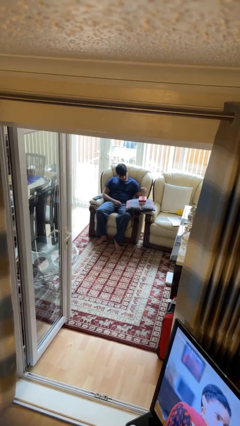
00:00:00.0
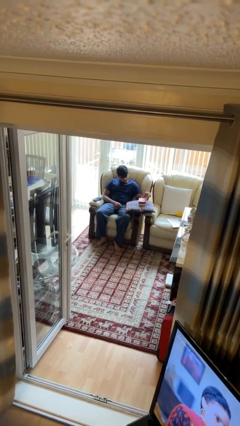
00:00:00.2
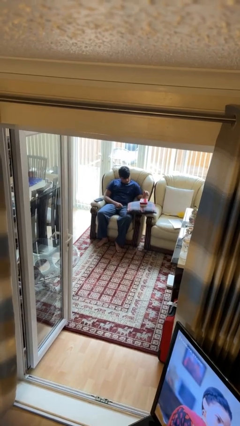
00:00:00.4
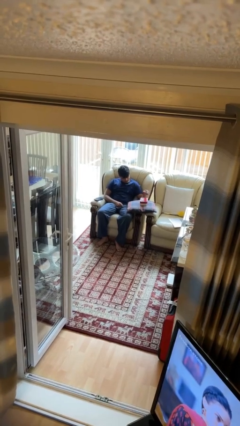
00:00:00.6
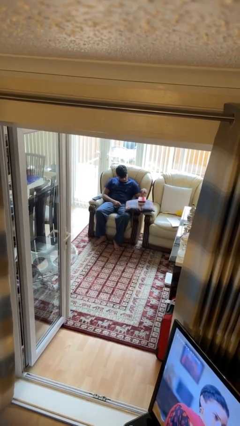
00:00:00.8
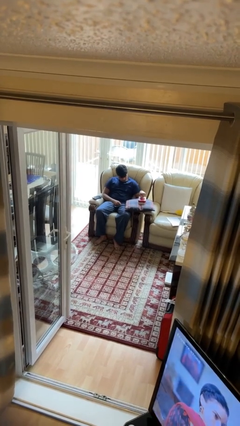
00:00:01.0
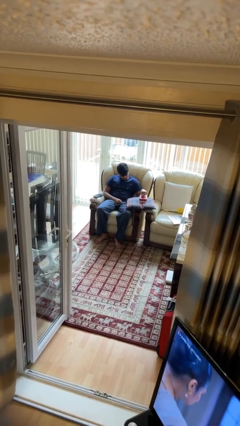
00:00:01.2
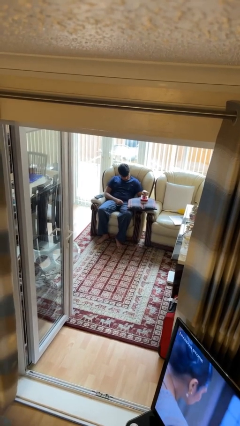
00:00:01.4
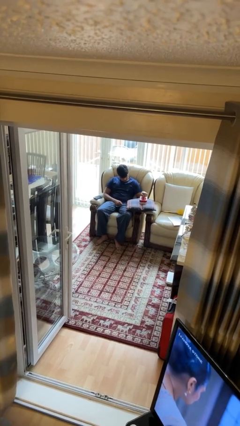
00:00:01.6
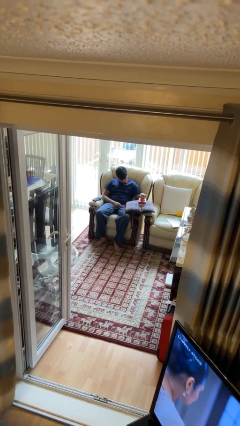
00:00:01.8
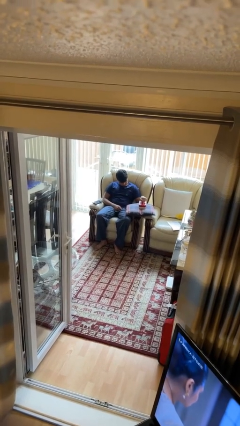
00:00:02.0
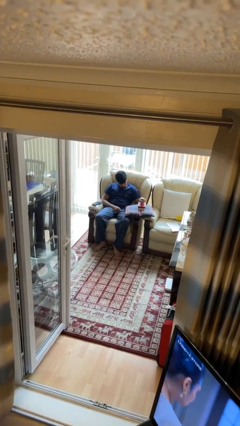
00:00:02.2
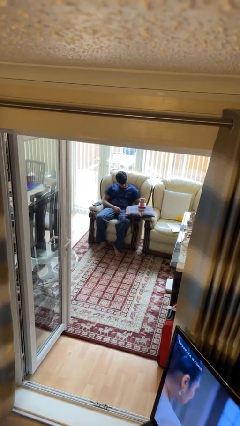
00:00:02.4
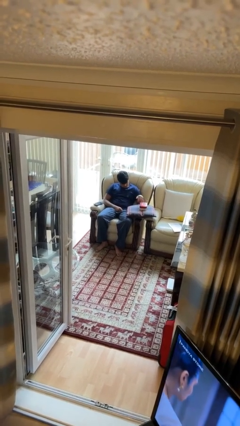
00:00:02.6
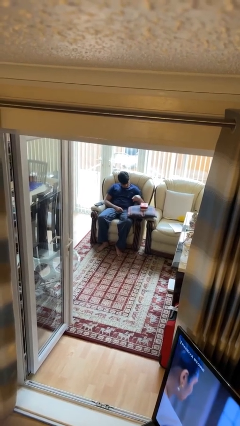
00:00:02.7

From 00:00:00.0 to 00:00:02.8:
person taps object with finger

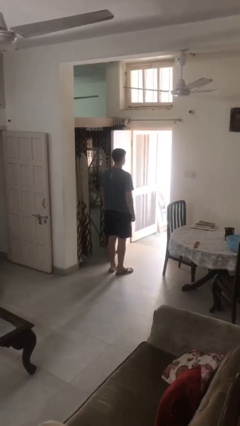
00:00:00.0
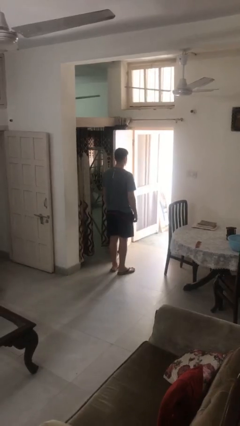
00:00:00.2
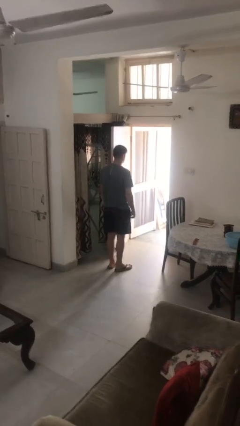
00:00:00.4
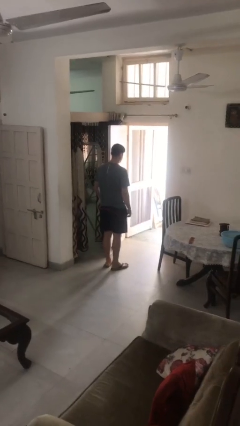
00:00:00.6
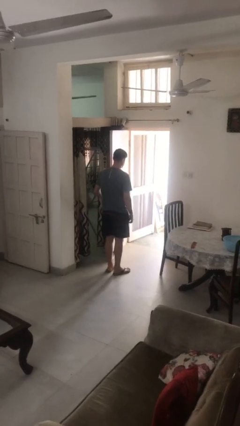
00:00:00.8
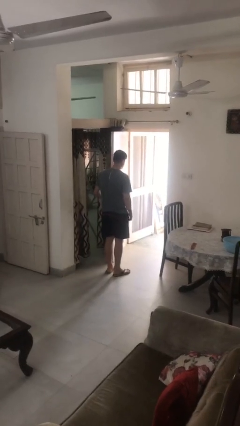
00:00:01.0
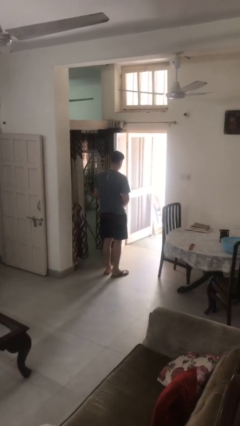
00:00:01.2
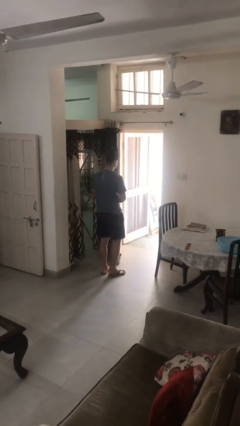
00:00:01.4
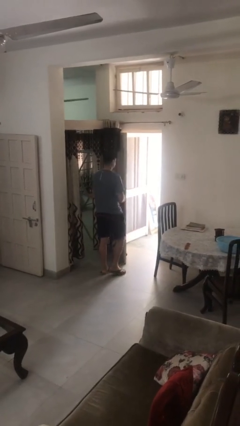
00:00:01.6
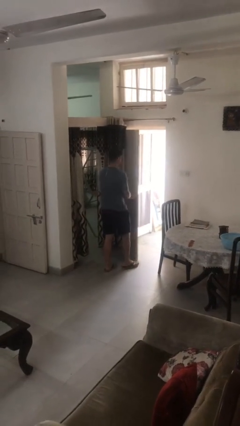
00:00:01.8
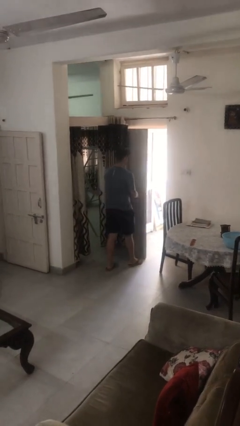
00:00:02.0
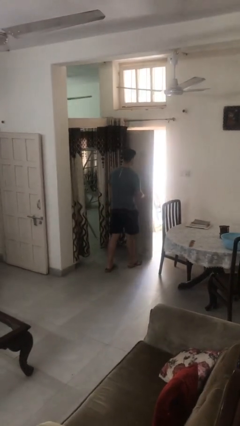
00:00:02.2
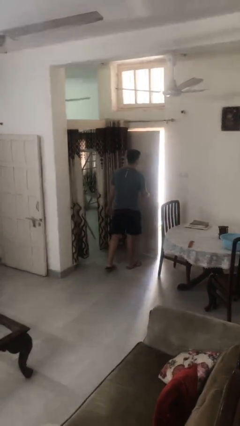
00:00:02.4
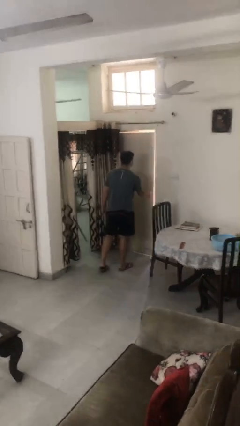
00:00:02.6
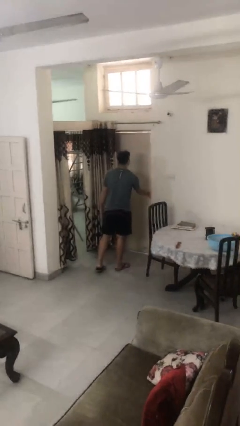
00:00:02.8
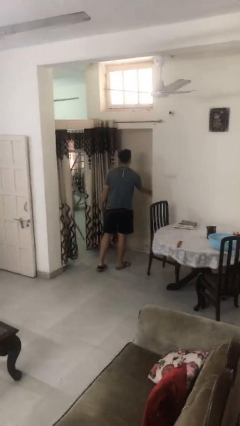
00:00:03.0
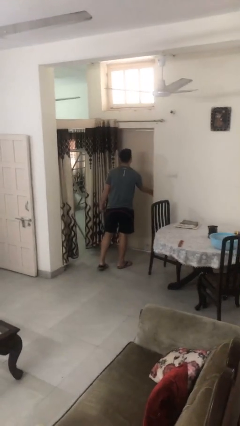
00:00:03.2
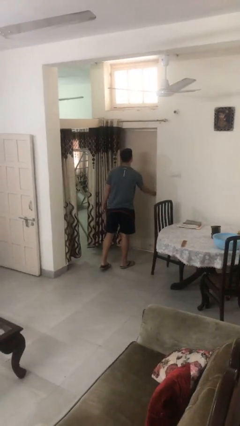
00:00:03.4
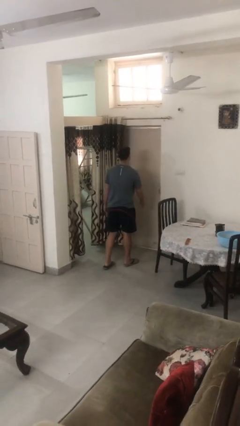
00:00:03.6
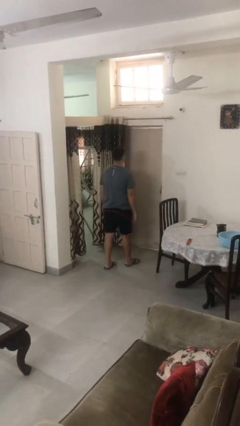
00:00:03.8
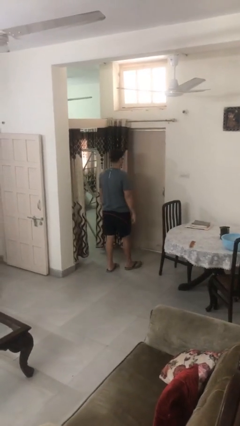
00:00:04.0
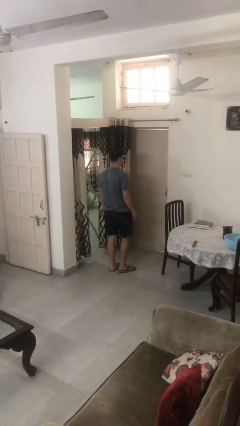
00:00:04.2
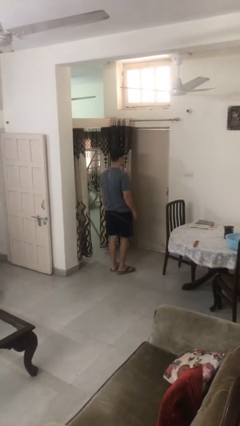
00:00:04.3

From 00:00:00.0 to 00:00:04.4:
person closes facility door

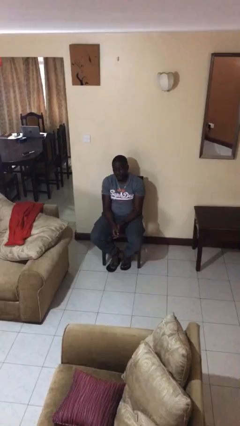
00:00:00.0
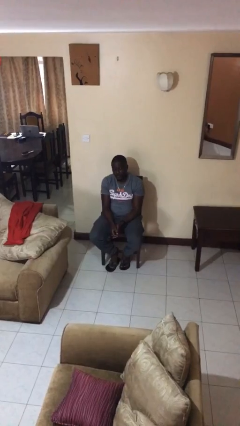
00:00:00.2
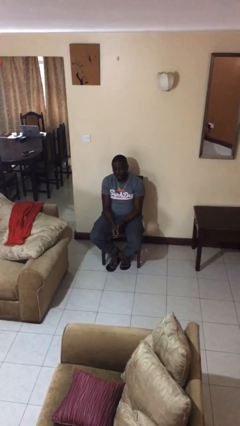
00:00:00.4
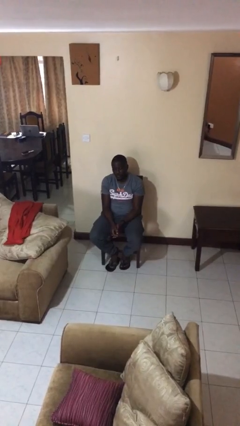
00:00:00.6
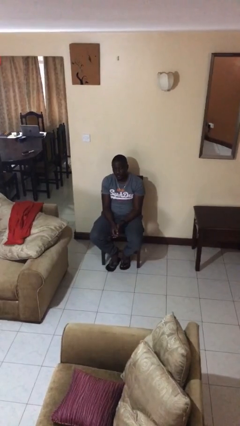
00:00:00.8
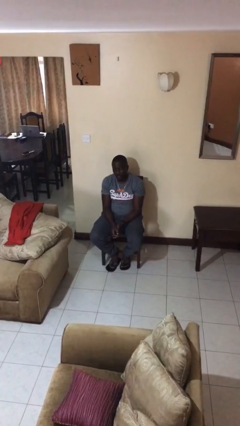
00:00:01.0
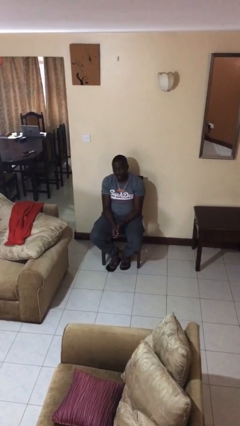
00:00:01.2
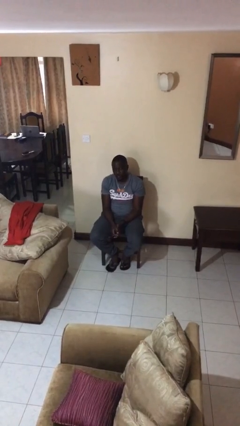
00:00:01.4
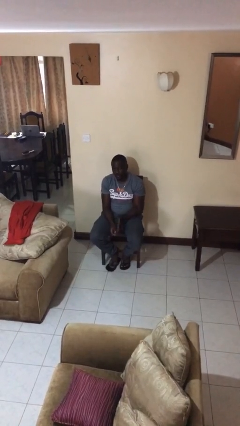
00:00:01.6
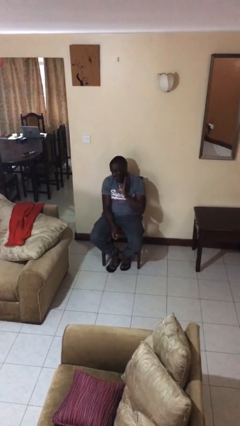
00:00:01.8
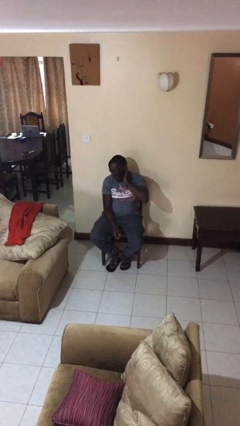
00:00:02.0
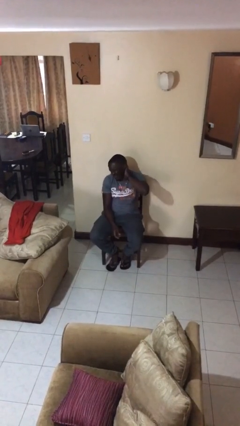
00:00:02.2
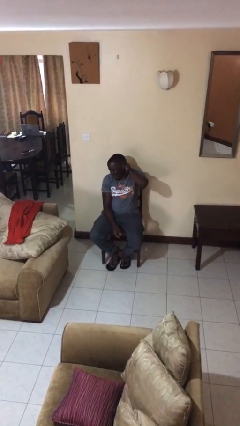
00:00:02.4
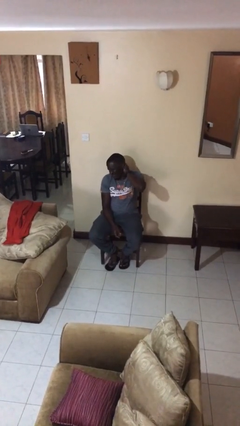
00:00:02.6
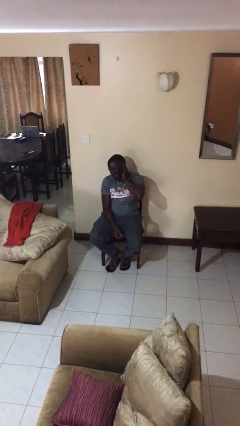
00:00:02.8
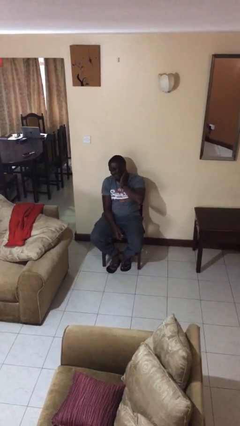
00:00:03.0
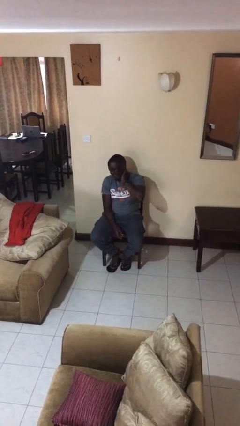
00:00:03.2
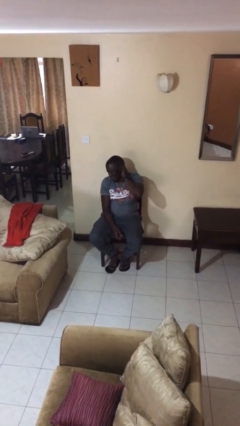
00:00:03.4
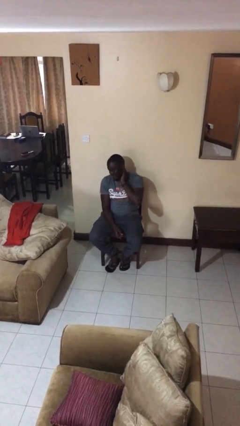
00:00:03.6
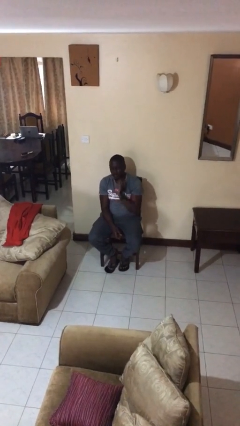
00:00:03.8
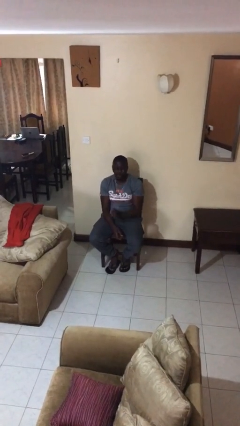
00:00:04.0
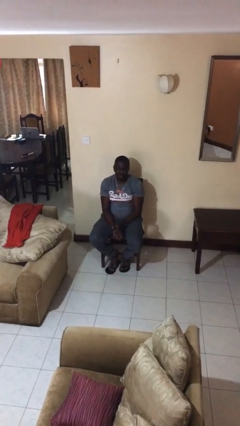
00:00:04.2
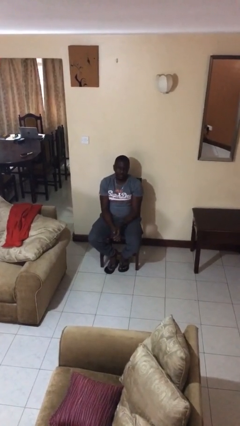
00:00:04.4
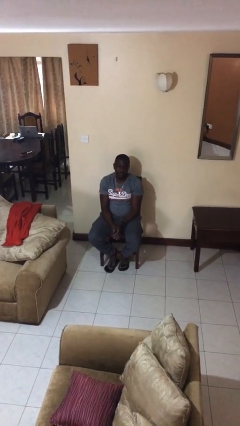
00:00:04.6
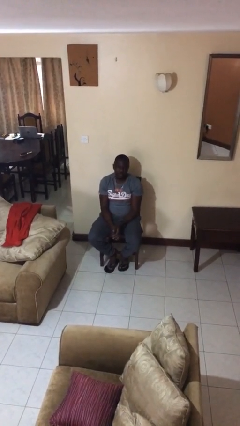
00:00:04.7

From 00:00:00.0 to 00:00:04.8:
person rubs neck

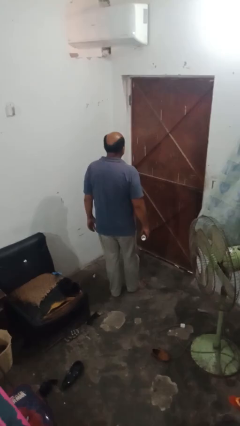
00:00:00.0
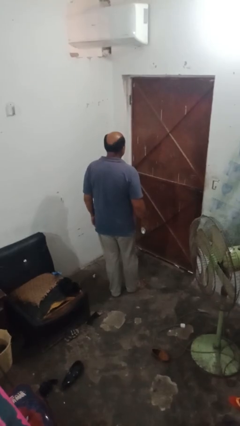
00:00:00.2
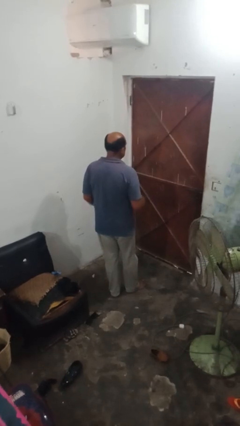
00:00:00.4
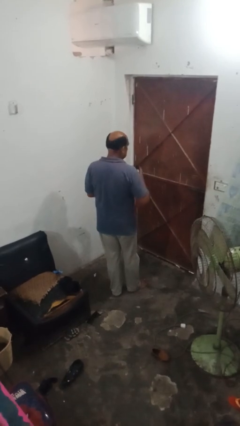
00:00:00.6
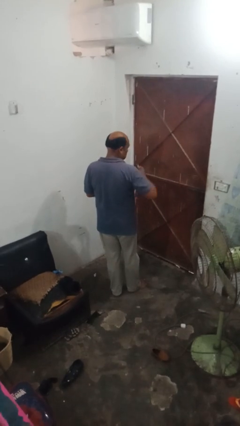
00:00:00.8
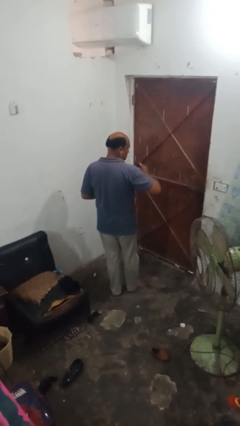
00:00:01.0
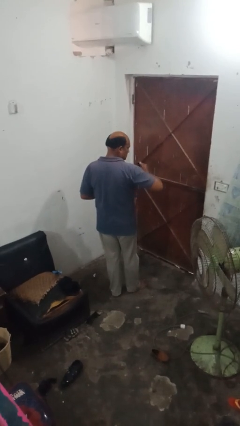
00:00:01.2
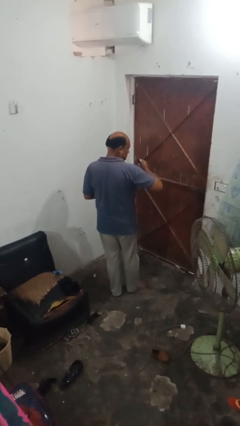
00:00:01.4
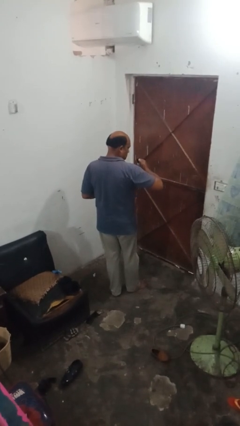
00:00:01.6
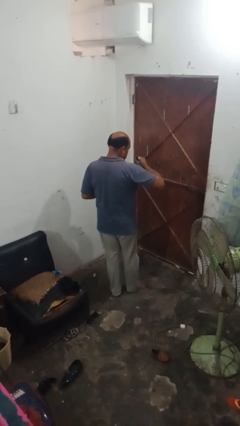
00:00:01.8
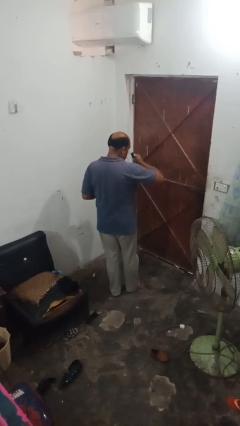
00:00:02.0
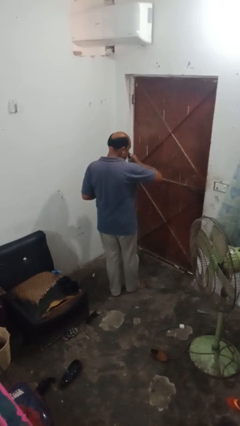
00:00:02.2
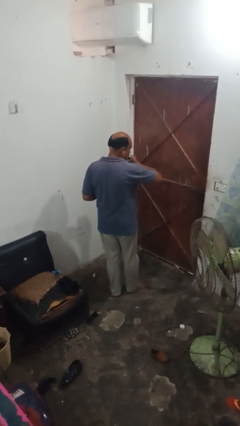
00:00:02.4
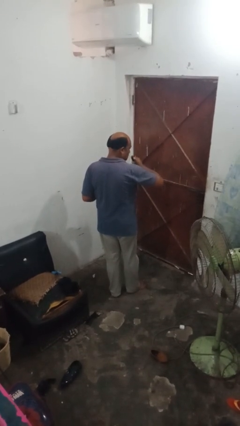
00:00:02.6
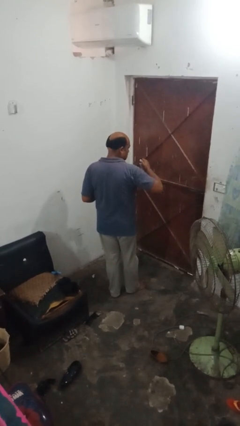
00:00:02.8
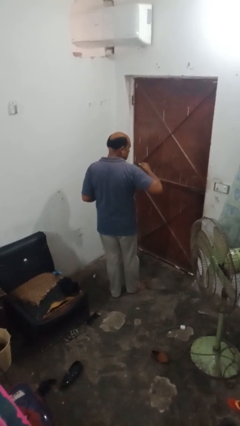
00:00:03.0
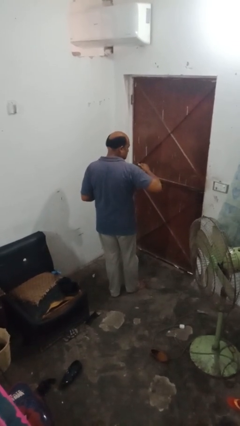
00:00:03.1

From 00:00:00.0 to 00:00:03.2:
person applies deodorant

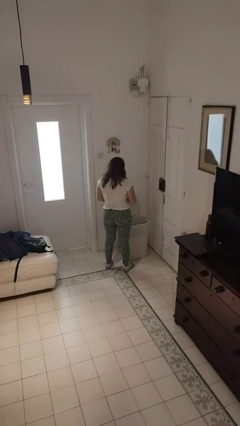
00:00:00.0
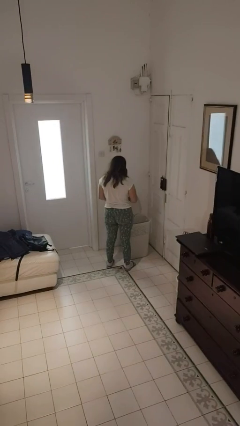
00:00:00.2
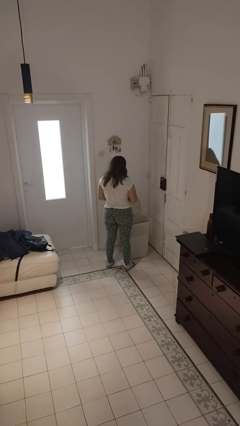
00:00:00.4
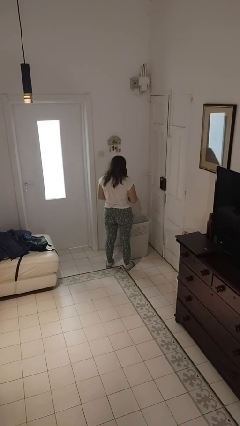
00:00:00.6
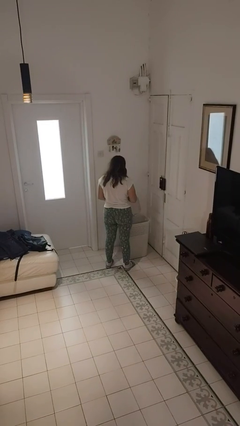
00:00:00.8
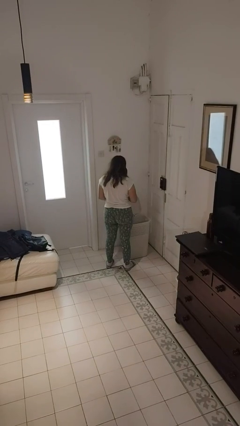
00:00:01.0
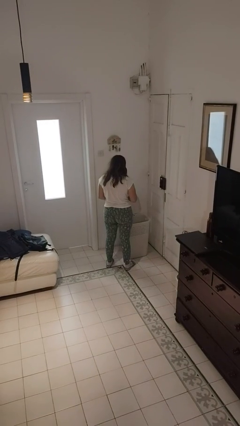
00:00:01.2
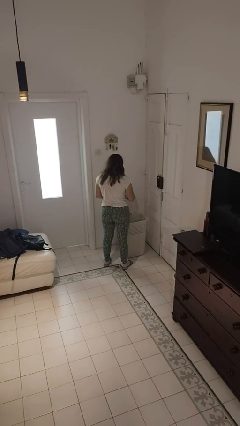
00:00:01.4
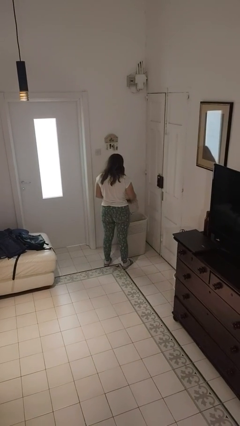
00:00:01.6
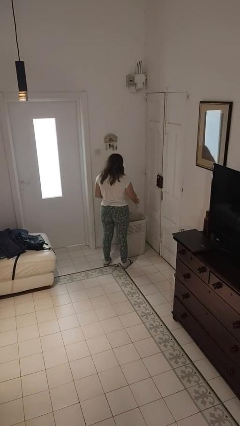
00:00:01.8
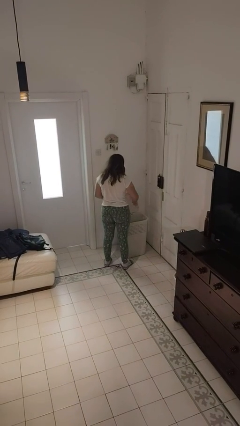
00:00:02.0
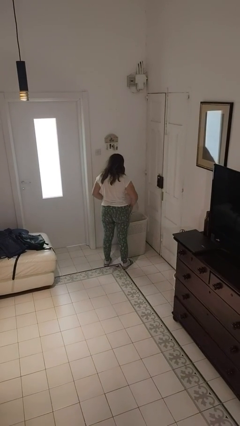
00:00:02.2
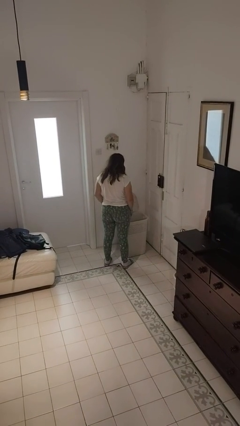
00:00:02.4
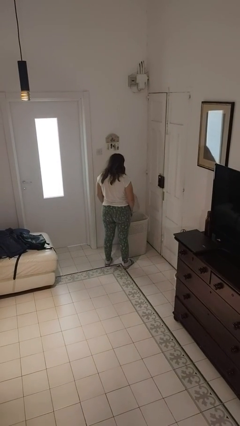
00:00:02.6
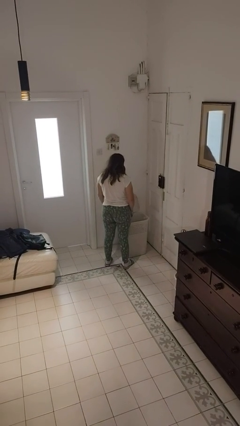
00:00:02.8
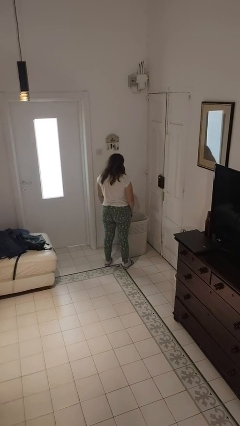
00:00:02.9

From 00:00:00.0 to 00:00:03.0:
person discards trash
